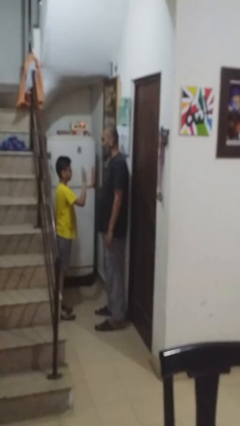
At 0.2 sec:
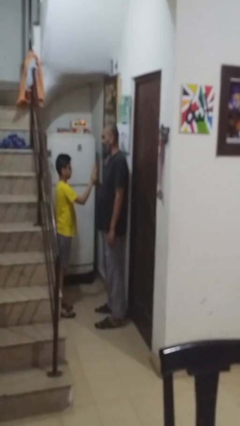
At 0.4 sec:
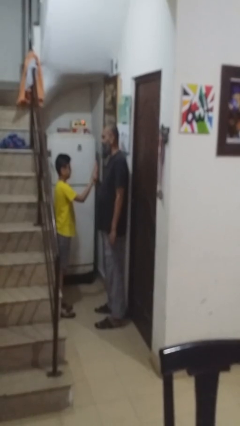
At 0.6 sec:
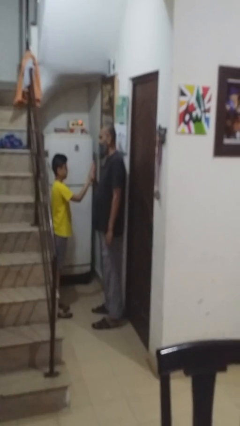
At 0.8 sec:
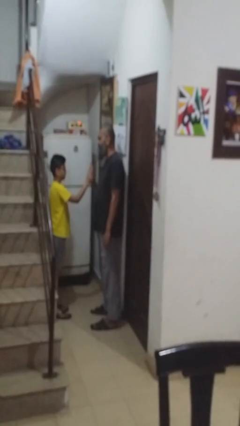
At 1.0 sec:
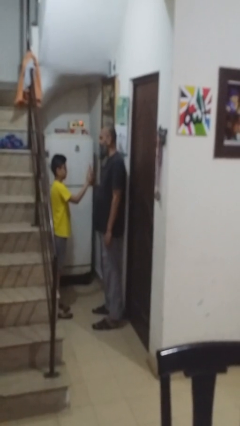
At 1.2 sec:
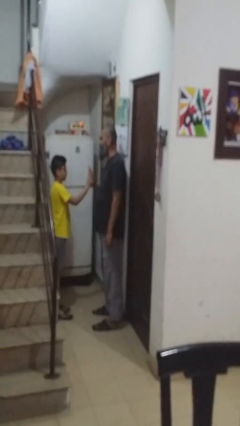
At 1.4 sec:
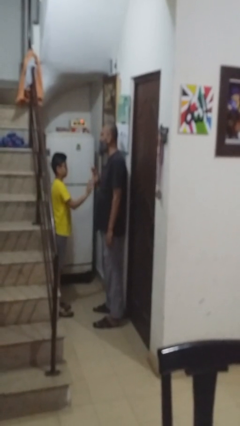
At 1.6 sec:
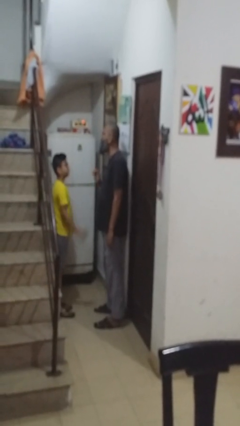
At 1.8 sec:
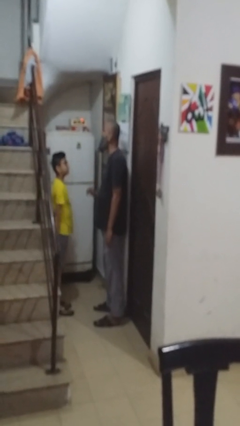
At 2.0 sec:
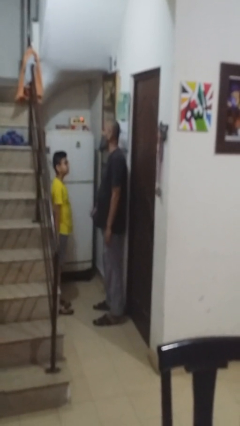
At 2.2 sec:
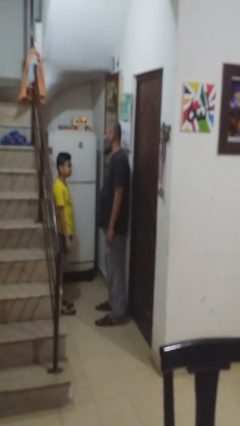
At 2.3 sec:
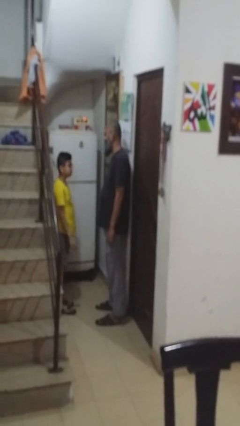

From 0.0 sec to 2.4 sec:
person highfives hand

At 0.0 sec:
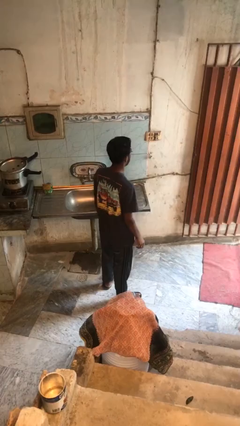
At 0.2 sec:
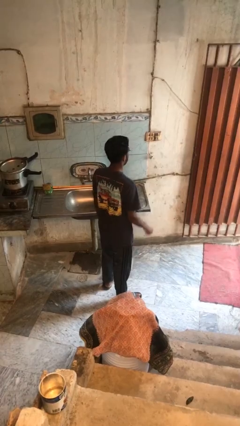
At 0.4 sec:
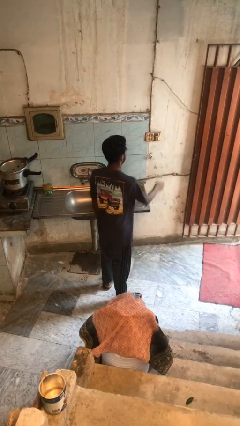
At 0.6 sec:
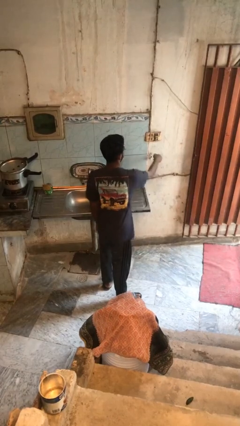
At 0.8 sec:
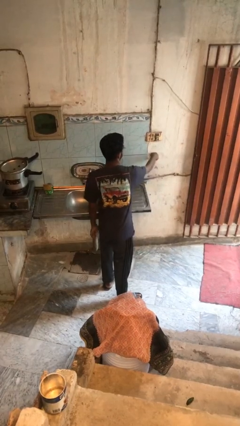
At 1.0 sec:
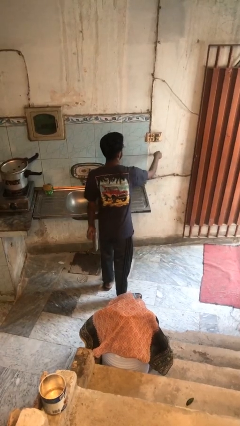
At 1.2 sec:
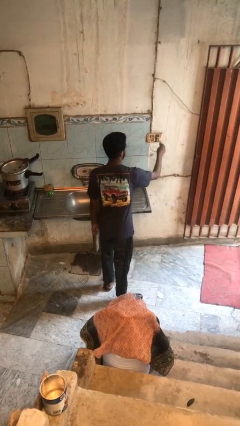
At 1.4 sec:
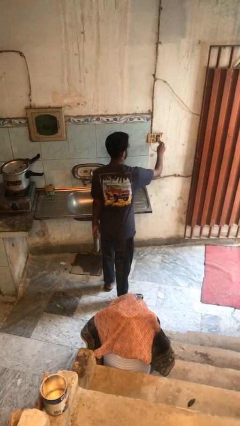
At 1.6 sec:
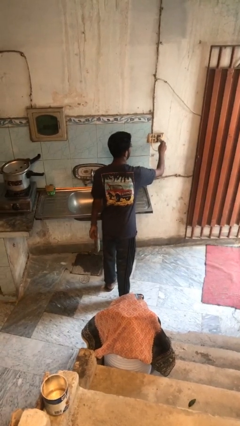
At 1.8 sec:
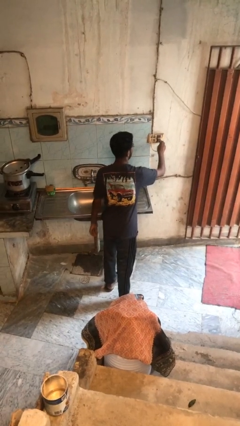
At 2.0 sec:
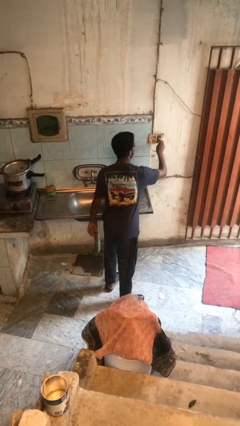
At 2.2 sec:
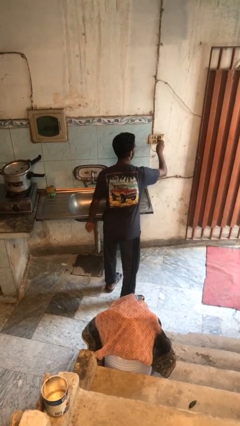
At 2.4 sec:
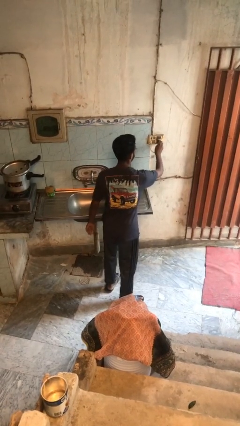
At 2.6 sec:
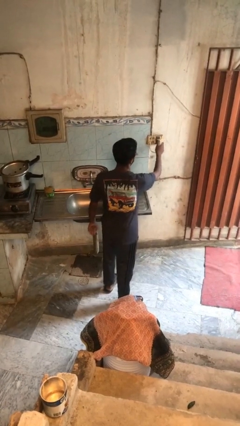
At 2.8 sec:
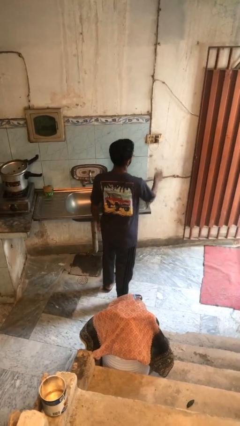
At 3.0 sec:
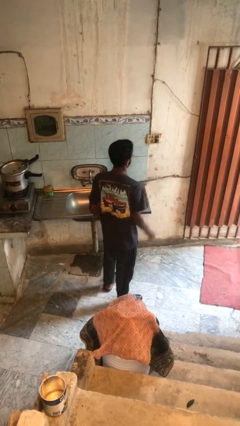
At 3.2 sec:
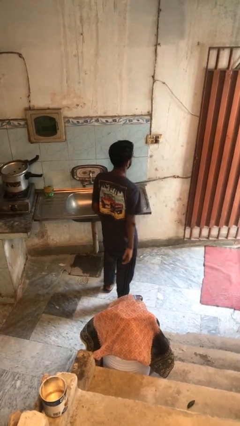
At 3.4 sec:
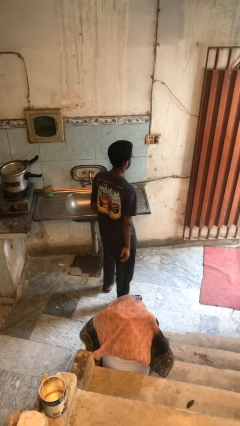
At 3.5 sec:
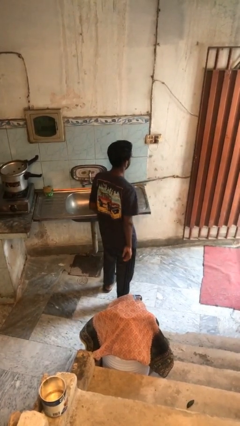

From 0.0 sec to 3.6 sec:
person plugs into electrical socket

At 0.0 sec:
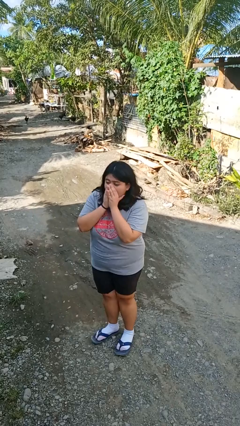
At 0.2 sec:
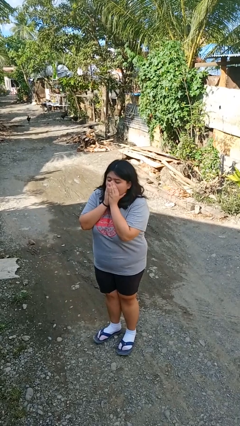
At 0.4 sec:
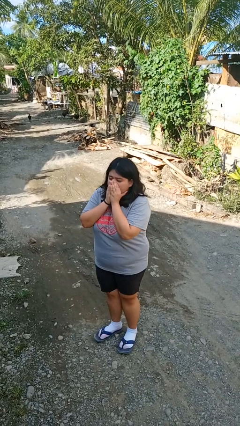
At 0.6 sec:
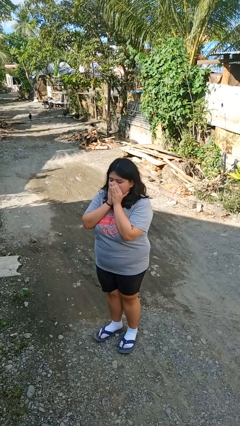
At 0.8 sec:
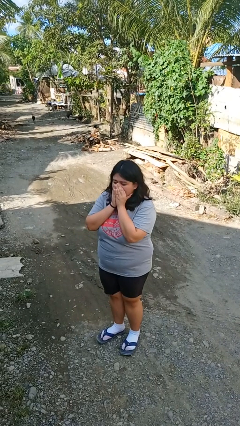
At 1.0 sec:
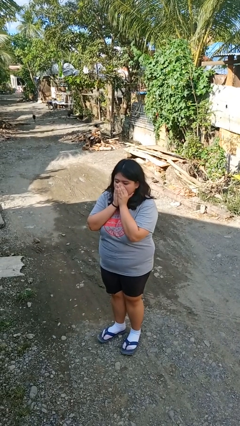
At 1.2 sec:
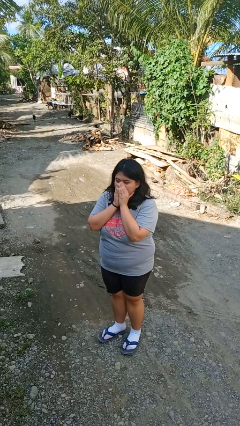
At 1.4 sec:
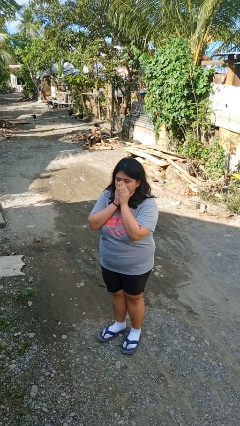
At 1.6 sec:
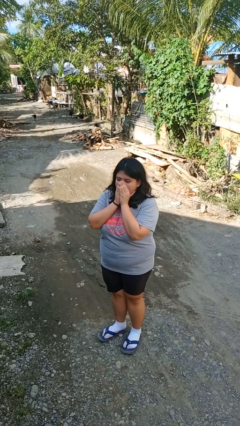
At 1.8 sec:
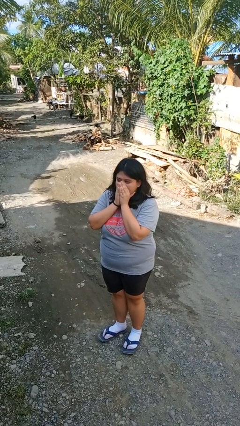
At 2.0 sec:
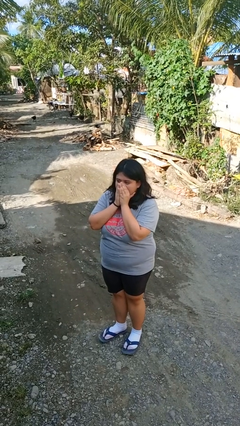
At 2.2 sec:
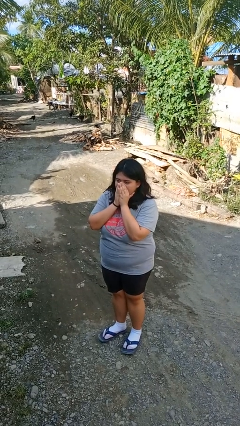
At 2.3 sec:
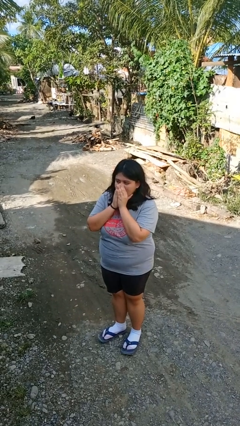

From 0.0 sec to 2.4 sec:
person blows into hands

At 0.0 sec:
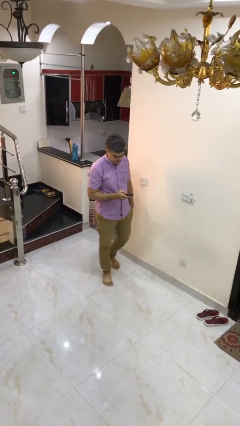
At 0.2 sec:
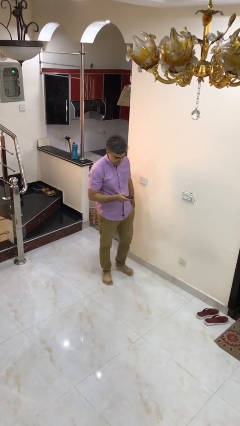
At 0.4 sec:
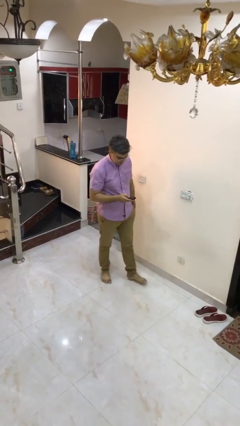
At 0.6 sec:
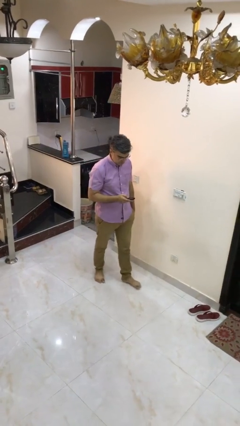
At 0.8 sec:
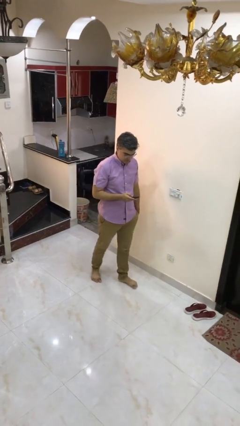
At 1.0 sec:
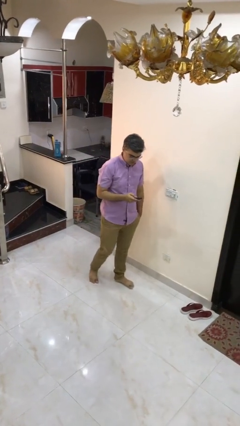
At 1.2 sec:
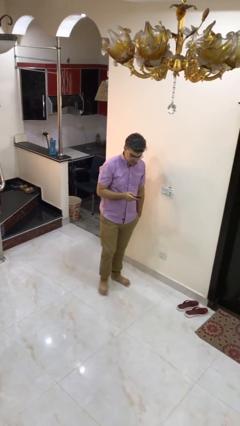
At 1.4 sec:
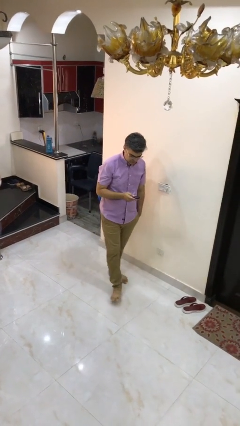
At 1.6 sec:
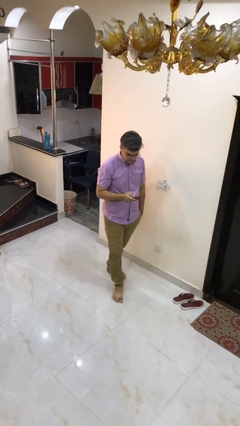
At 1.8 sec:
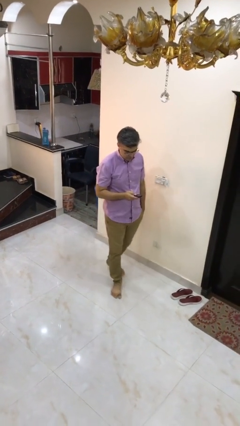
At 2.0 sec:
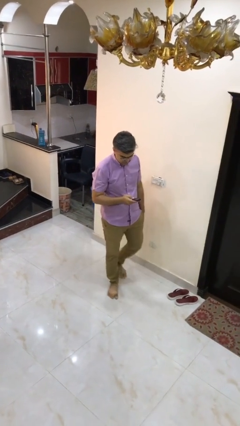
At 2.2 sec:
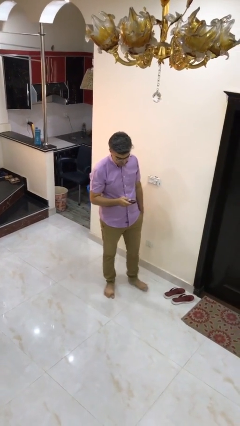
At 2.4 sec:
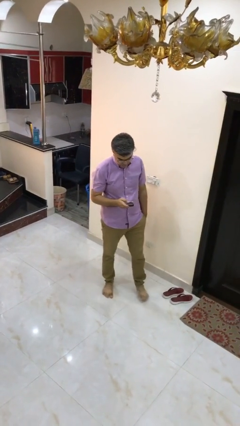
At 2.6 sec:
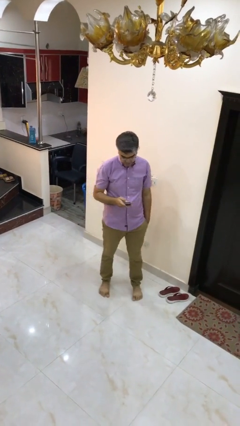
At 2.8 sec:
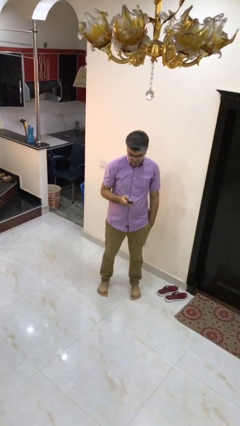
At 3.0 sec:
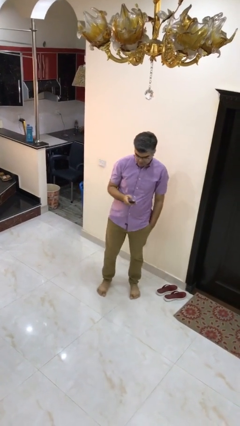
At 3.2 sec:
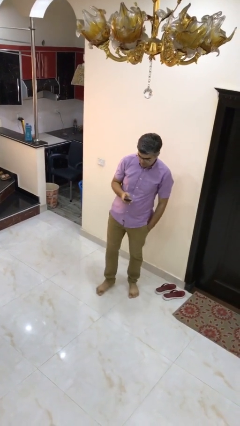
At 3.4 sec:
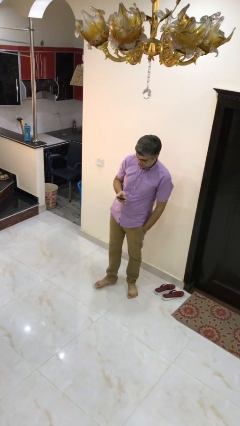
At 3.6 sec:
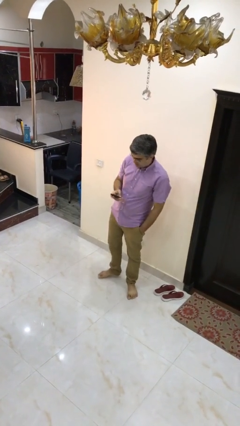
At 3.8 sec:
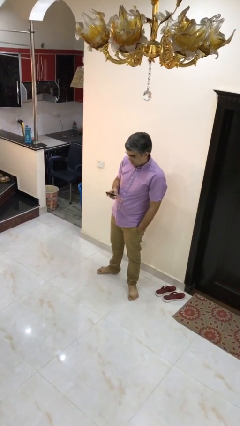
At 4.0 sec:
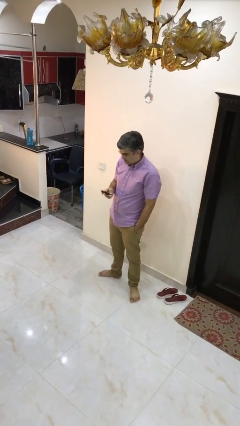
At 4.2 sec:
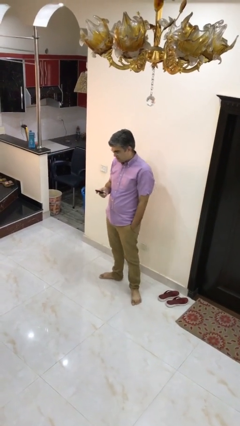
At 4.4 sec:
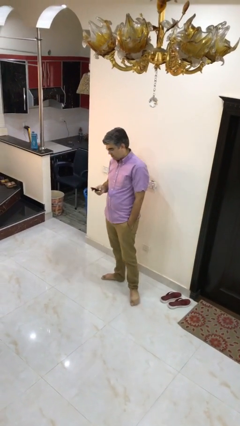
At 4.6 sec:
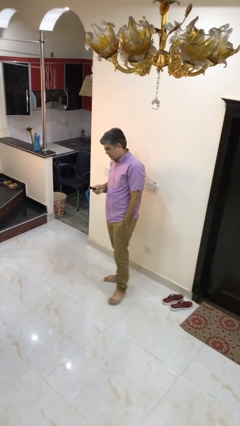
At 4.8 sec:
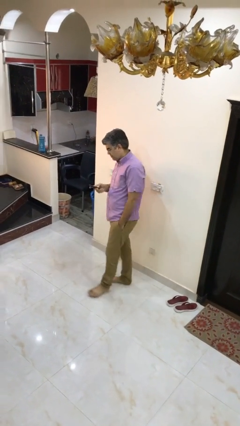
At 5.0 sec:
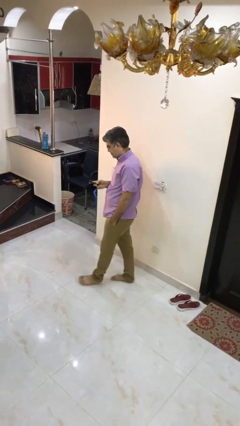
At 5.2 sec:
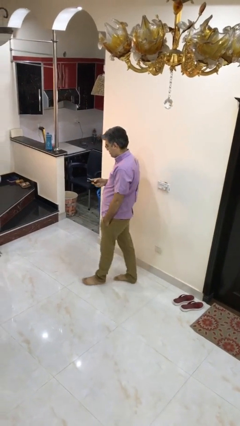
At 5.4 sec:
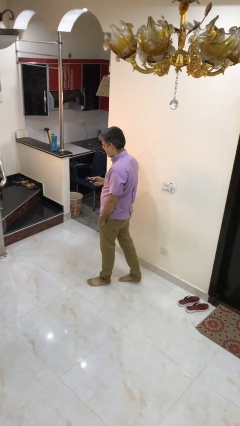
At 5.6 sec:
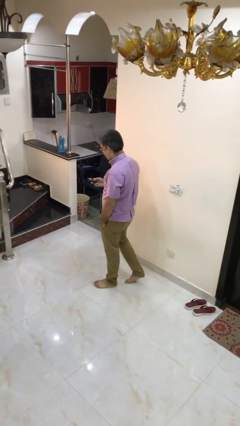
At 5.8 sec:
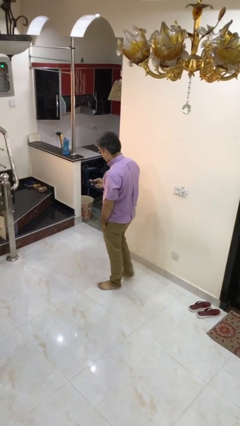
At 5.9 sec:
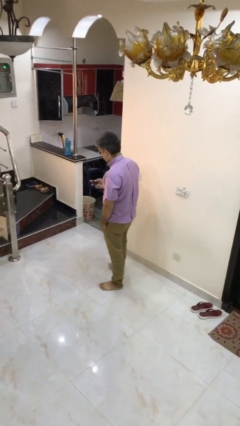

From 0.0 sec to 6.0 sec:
person texts on phone

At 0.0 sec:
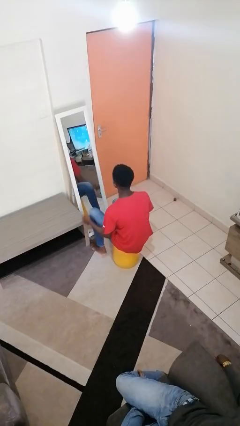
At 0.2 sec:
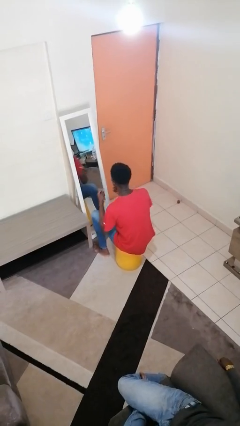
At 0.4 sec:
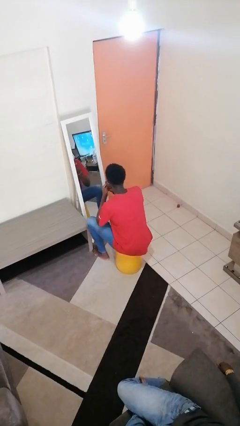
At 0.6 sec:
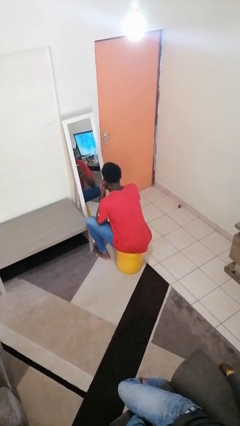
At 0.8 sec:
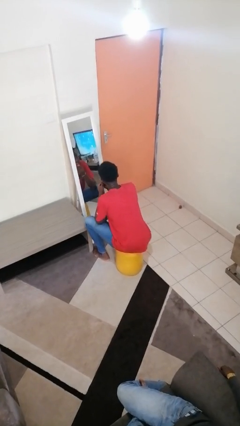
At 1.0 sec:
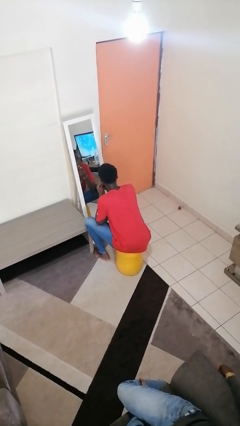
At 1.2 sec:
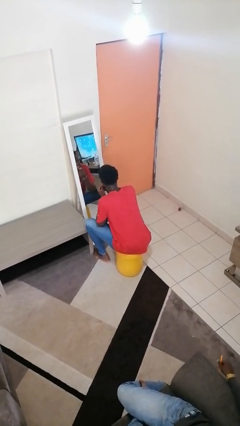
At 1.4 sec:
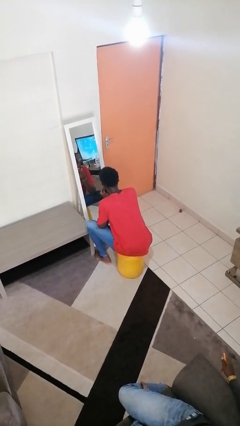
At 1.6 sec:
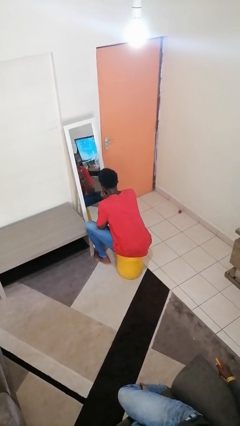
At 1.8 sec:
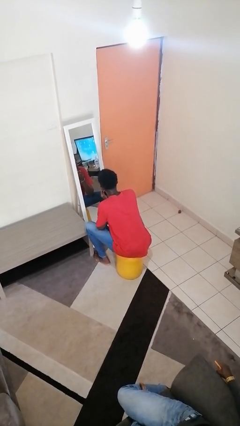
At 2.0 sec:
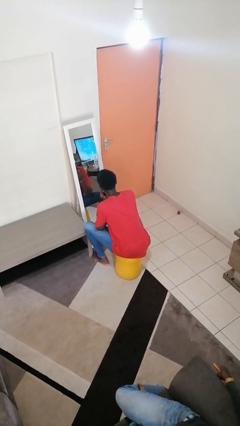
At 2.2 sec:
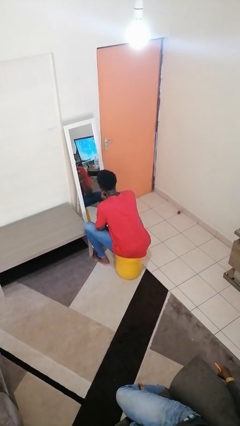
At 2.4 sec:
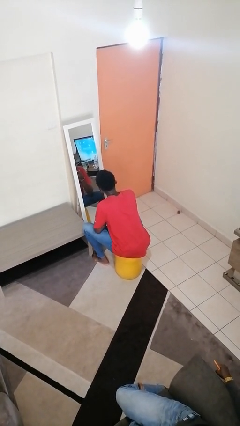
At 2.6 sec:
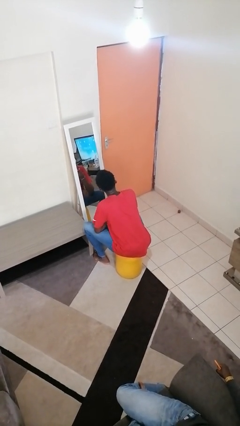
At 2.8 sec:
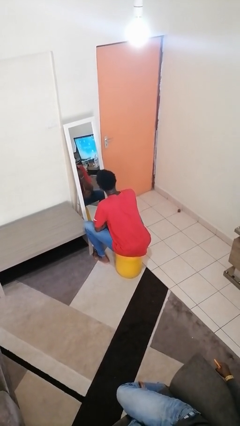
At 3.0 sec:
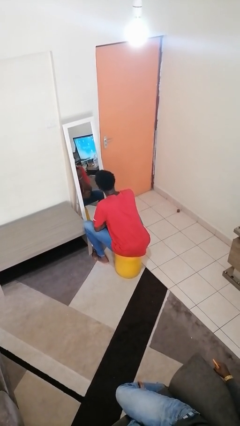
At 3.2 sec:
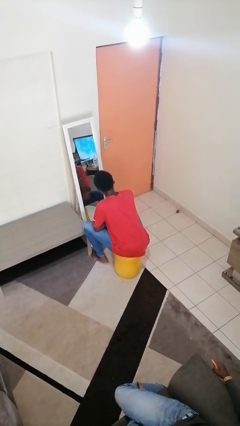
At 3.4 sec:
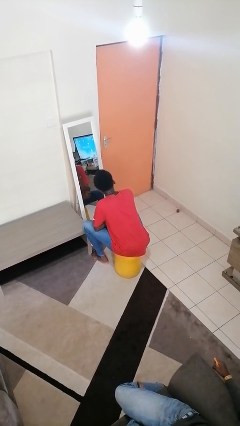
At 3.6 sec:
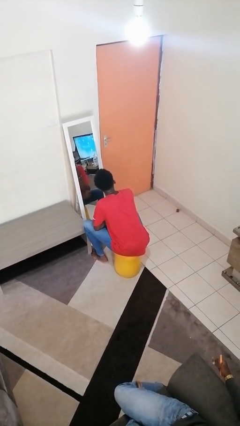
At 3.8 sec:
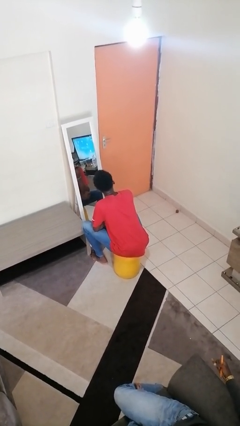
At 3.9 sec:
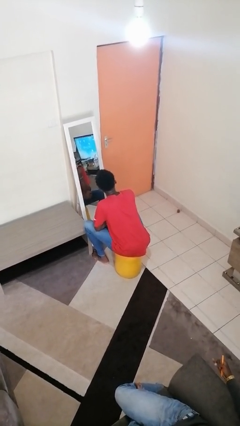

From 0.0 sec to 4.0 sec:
person applies lip makeup
